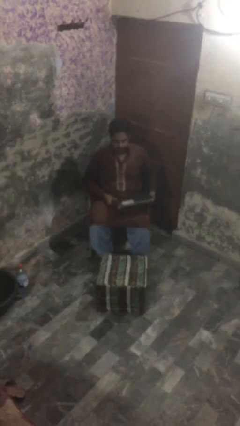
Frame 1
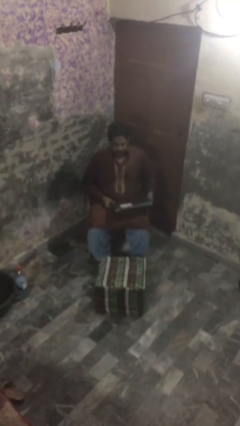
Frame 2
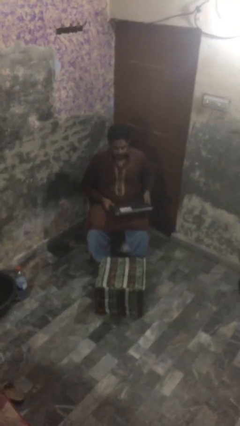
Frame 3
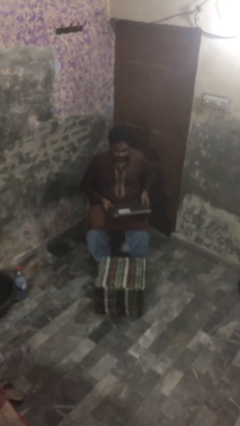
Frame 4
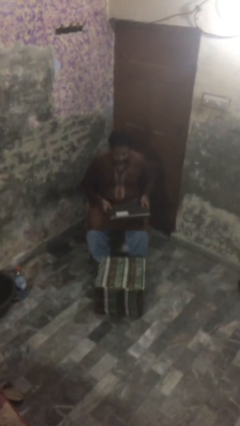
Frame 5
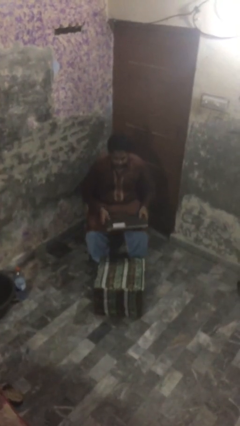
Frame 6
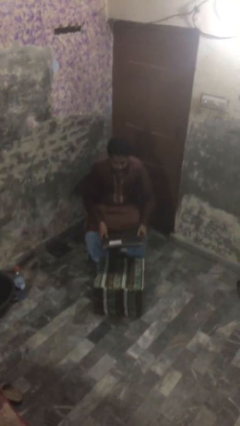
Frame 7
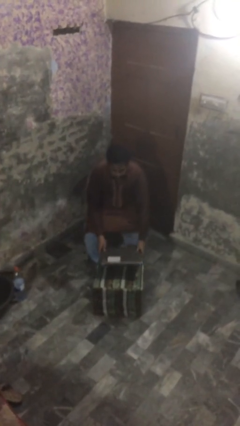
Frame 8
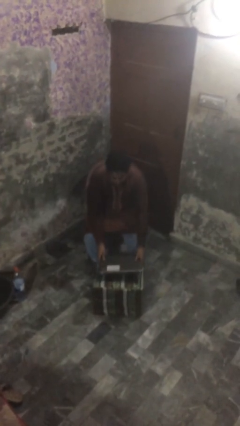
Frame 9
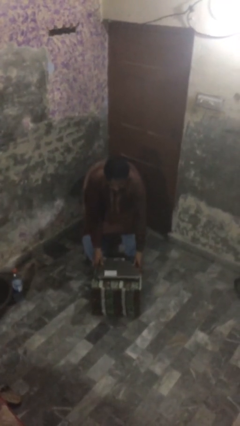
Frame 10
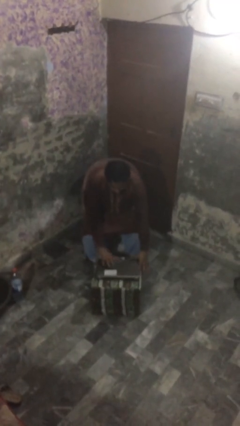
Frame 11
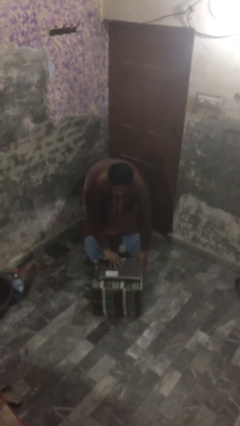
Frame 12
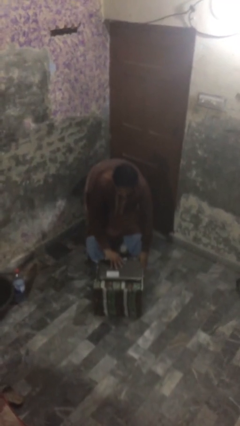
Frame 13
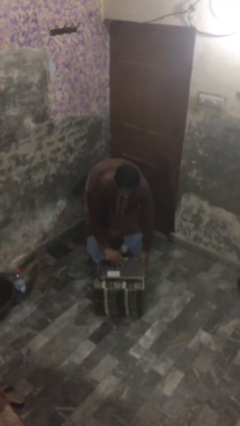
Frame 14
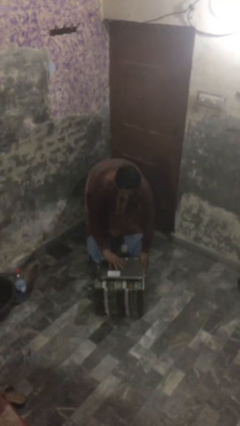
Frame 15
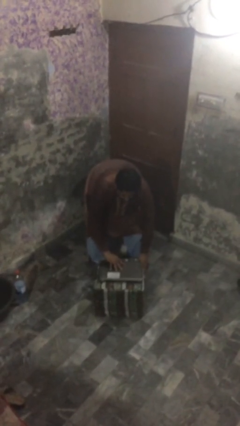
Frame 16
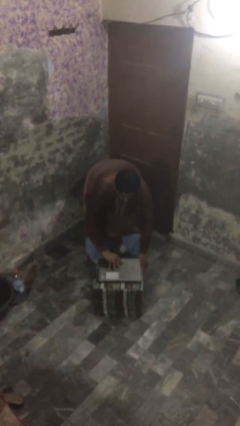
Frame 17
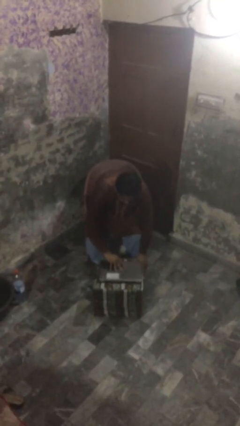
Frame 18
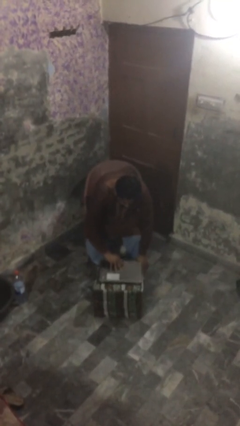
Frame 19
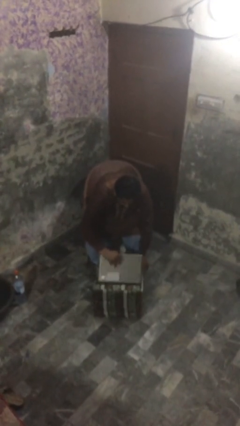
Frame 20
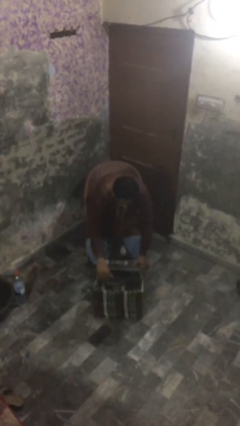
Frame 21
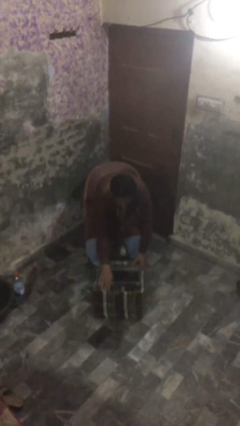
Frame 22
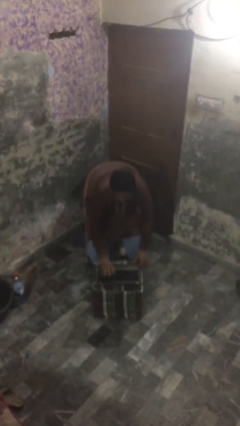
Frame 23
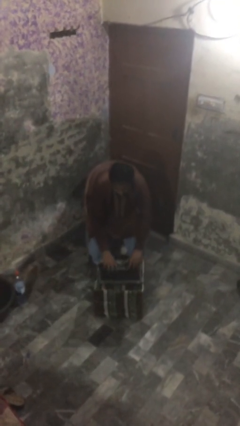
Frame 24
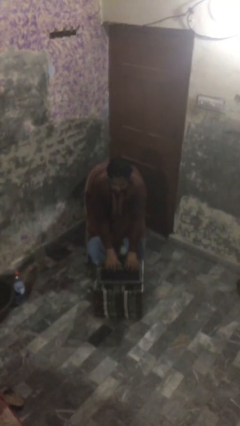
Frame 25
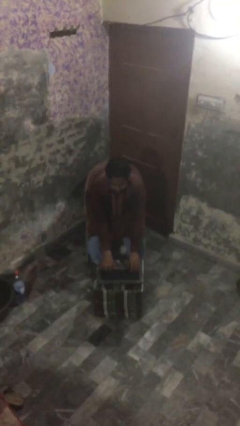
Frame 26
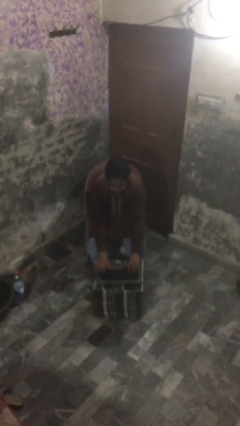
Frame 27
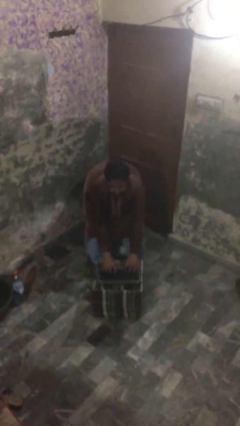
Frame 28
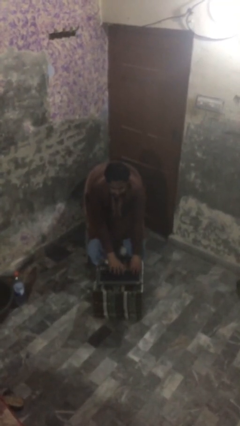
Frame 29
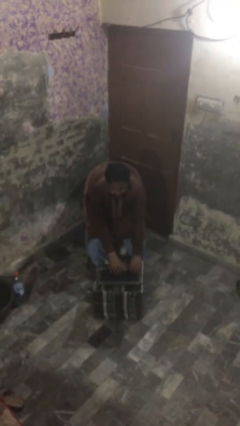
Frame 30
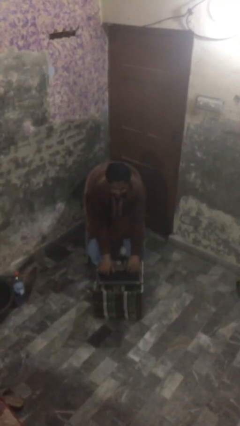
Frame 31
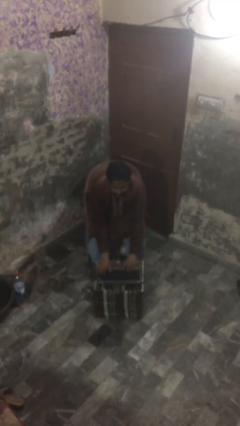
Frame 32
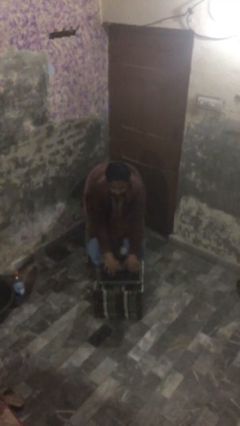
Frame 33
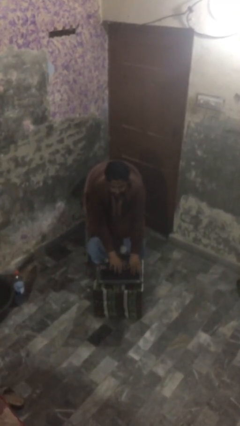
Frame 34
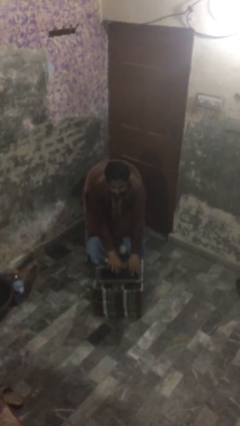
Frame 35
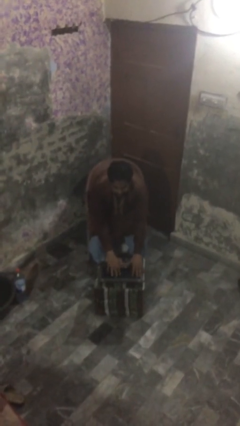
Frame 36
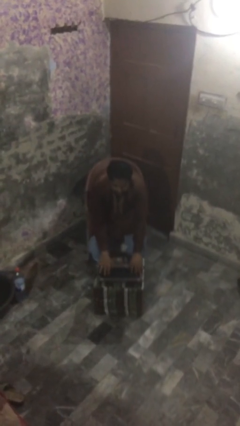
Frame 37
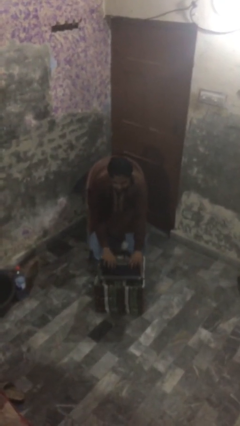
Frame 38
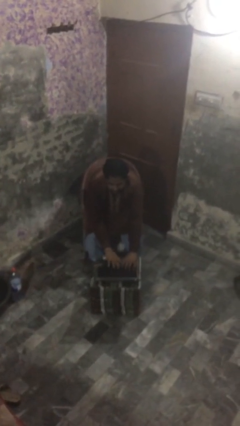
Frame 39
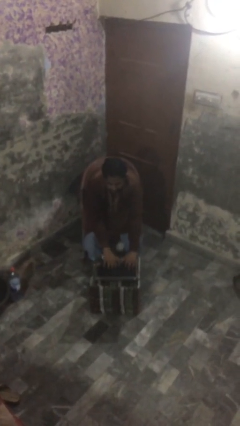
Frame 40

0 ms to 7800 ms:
person interacts with laptop

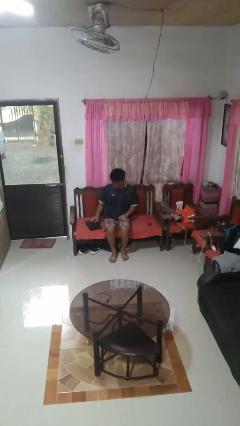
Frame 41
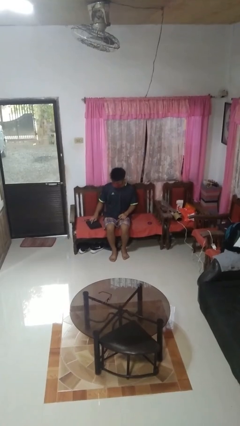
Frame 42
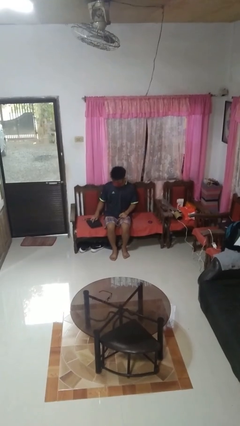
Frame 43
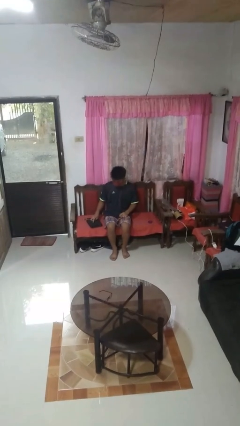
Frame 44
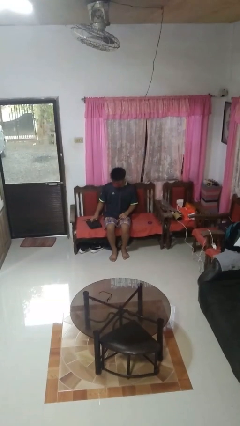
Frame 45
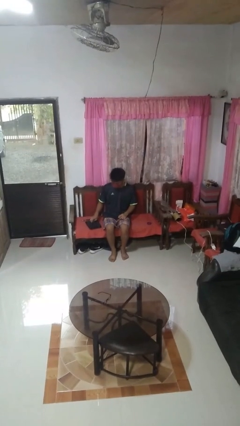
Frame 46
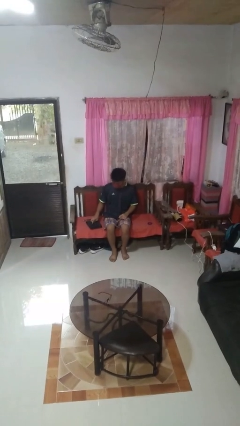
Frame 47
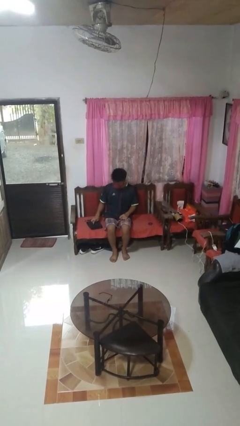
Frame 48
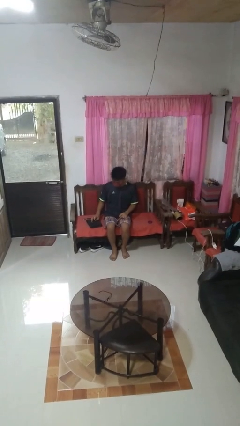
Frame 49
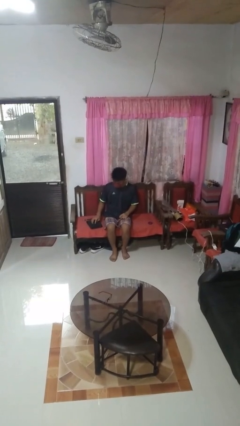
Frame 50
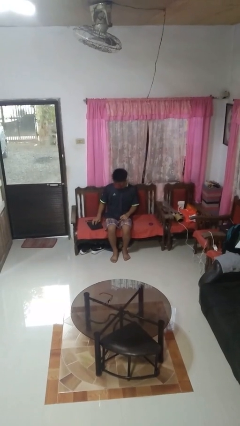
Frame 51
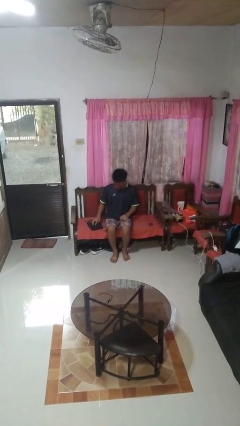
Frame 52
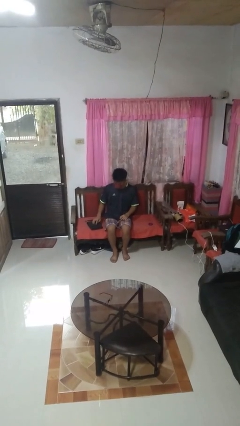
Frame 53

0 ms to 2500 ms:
person taps object with finger

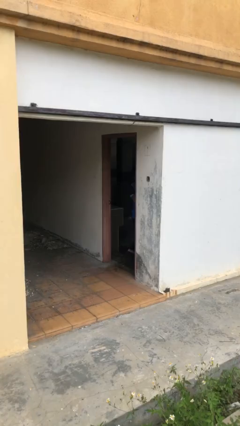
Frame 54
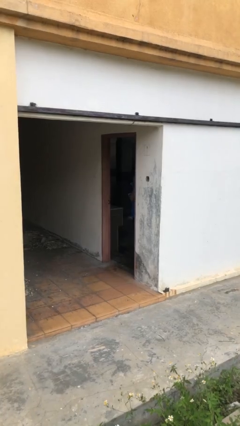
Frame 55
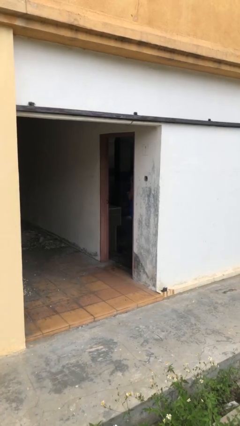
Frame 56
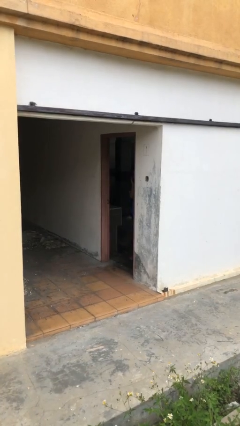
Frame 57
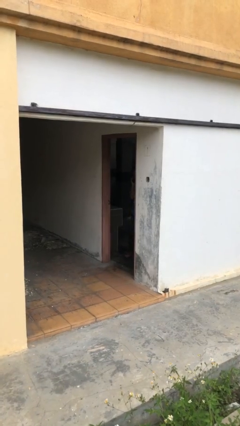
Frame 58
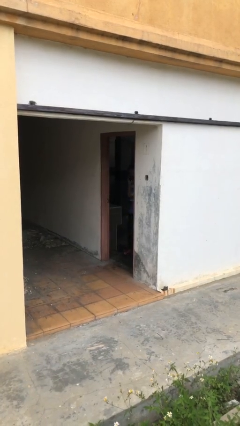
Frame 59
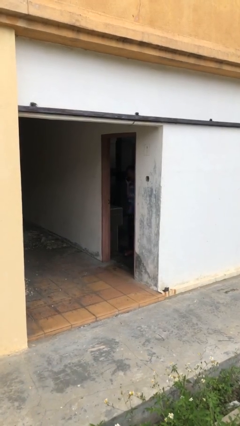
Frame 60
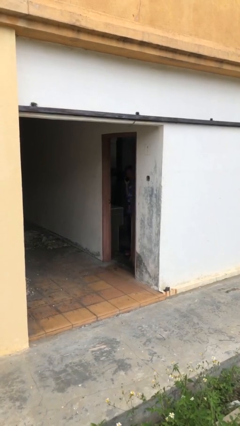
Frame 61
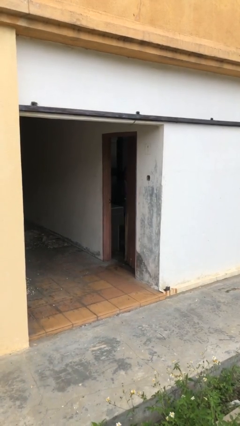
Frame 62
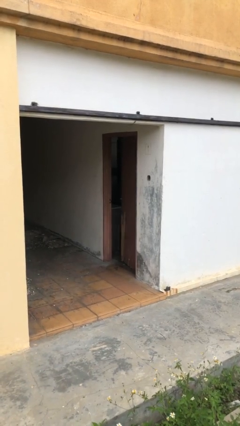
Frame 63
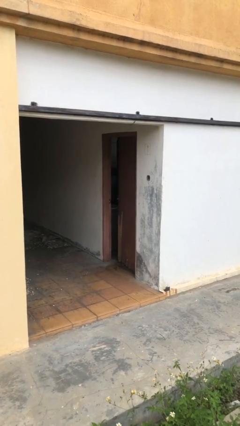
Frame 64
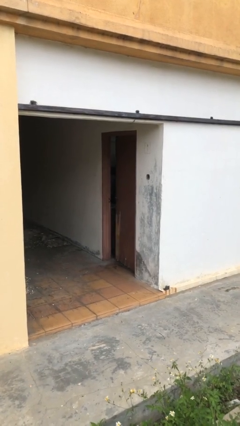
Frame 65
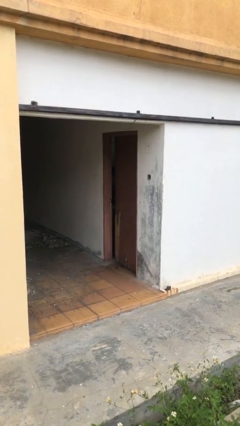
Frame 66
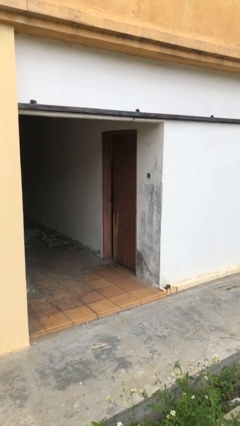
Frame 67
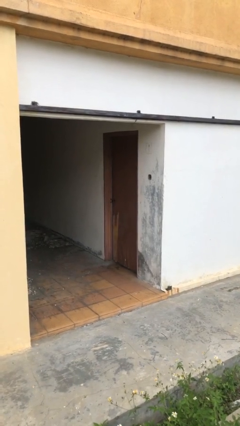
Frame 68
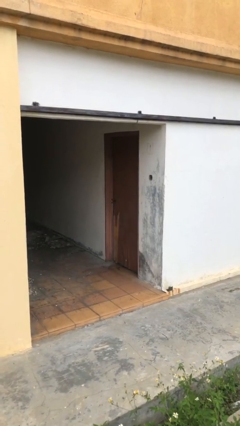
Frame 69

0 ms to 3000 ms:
person closes facility door

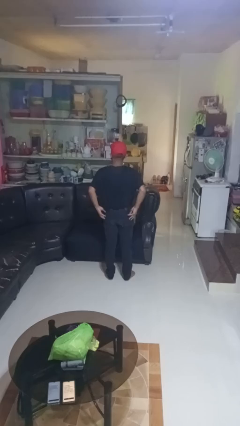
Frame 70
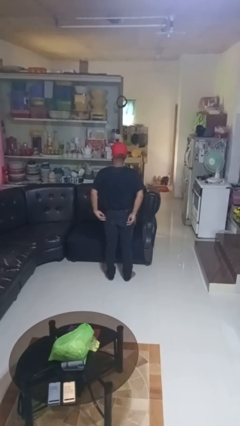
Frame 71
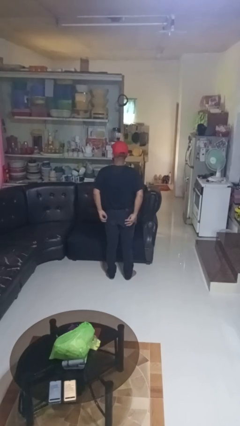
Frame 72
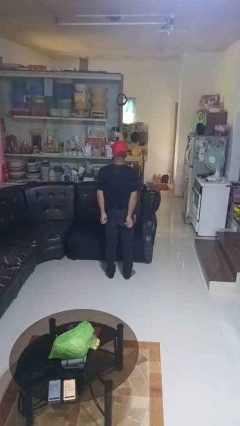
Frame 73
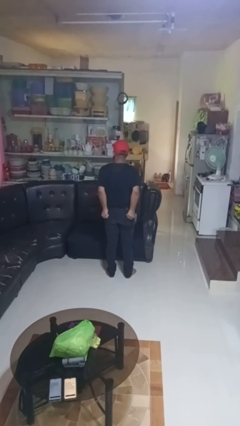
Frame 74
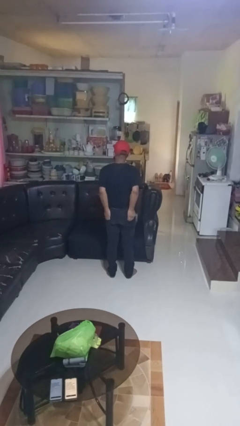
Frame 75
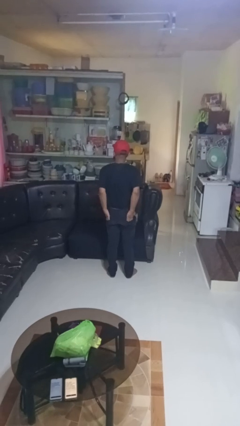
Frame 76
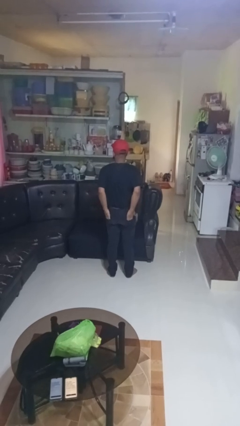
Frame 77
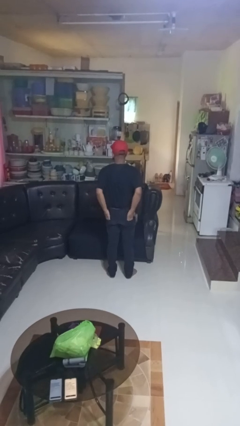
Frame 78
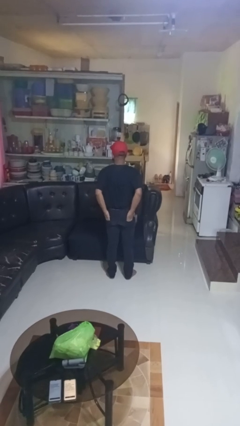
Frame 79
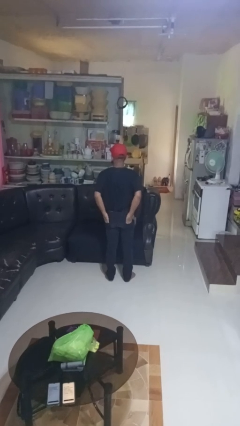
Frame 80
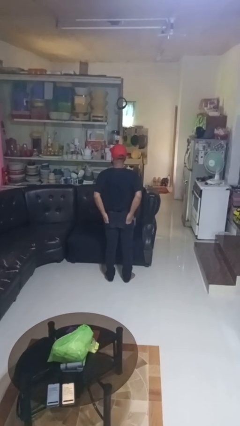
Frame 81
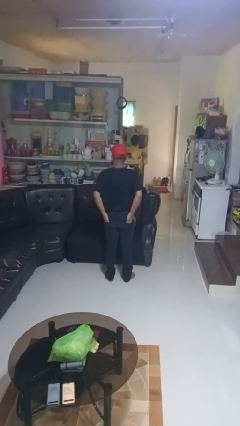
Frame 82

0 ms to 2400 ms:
person puts hands in back pockets

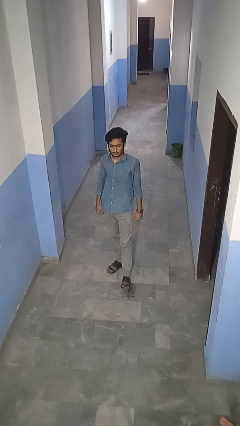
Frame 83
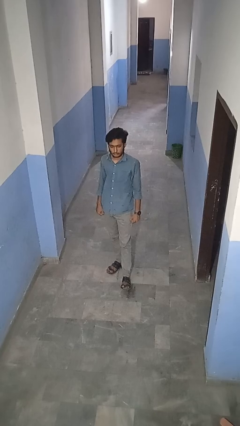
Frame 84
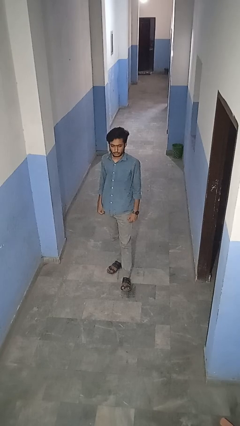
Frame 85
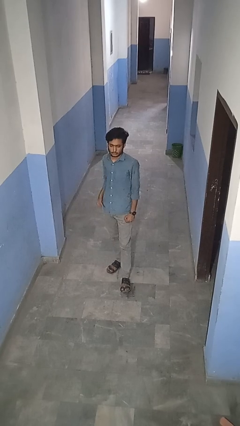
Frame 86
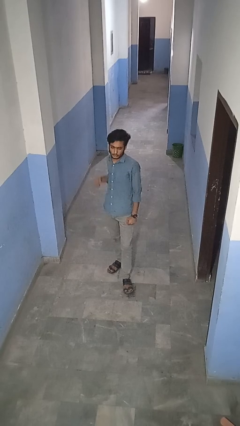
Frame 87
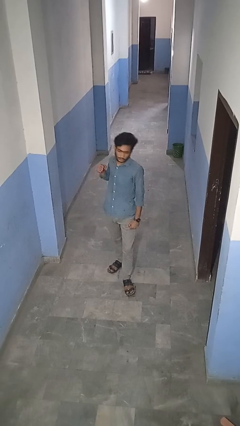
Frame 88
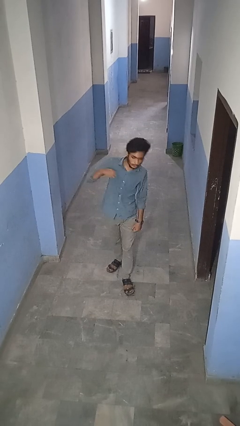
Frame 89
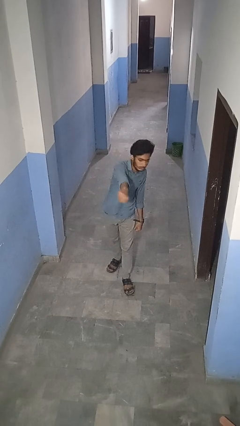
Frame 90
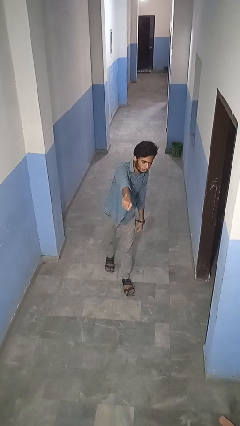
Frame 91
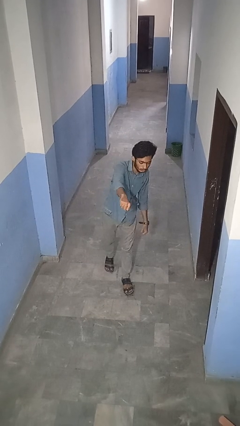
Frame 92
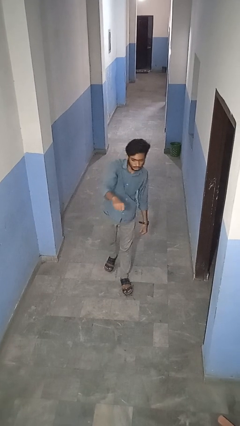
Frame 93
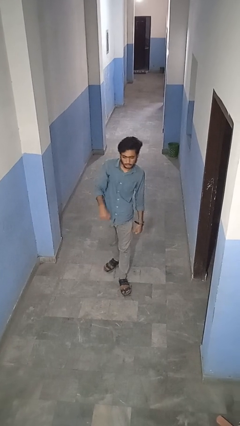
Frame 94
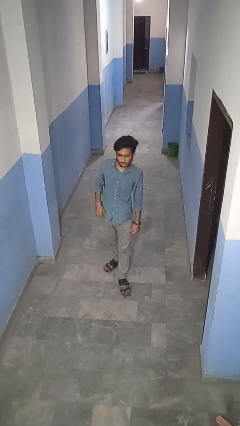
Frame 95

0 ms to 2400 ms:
person punches
